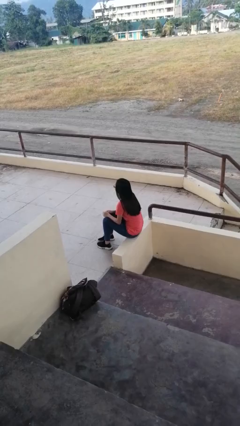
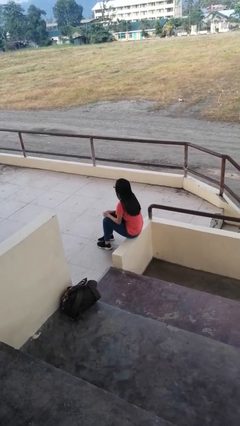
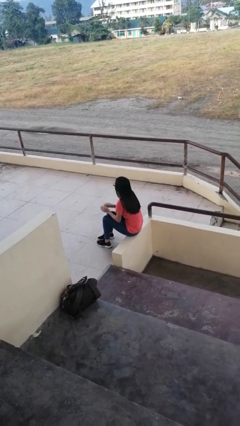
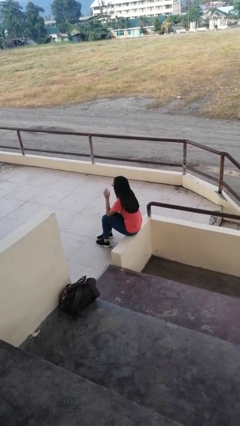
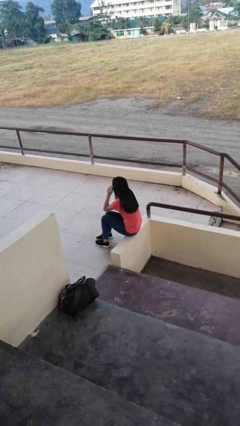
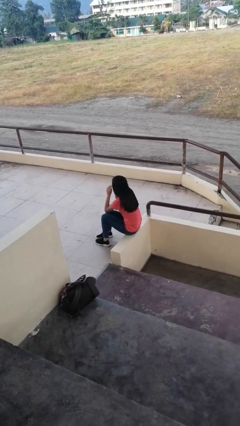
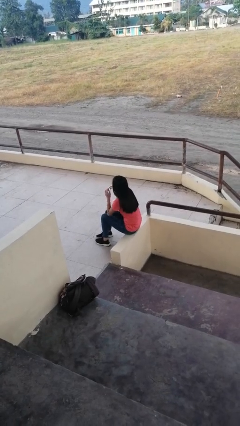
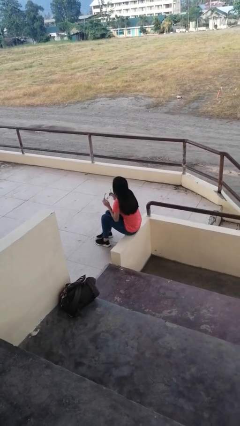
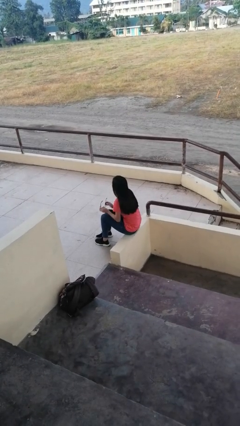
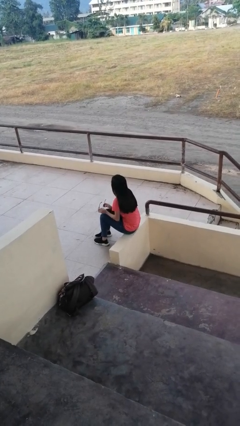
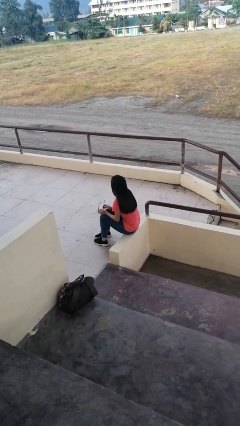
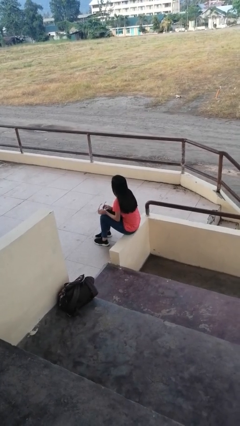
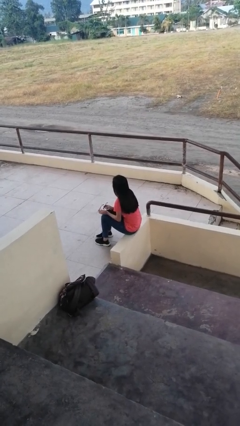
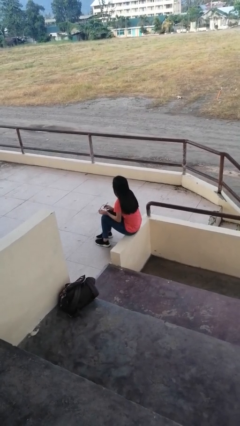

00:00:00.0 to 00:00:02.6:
person takes off glasses

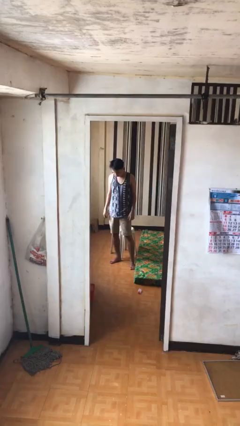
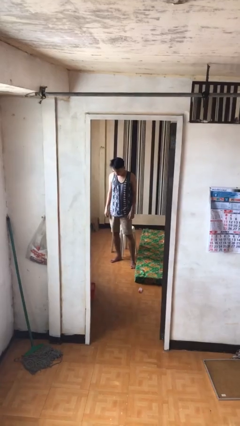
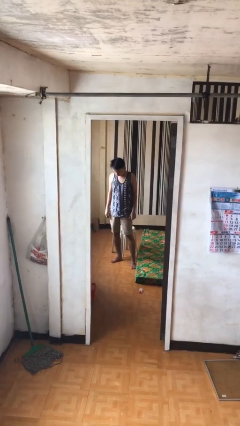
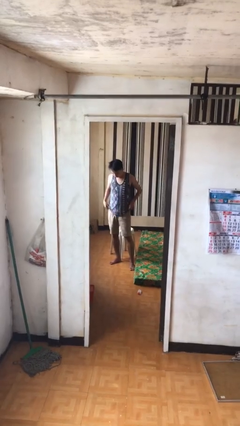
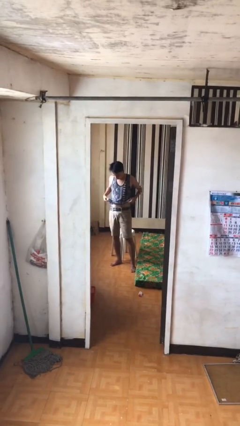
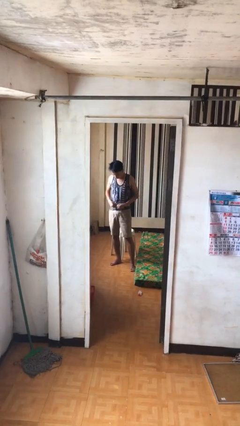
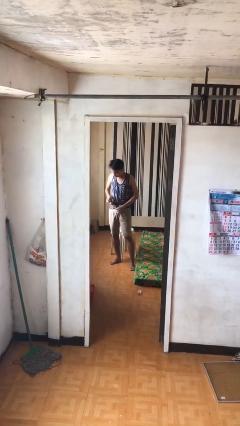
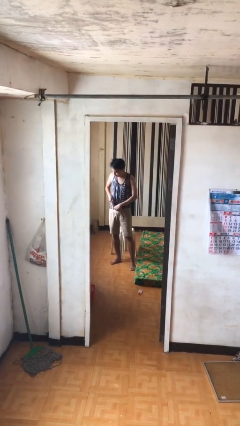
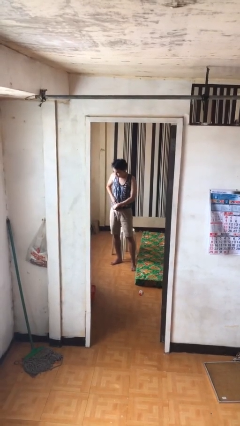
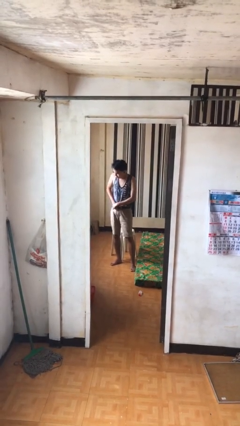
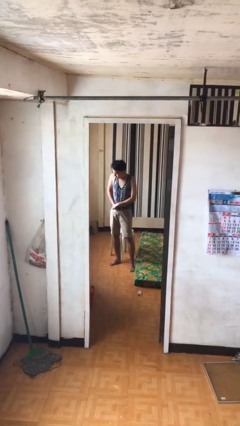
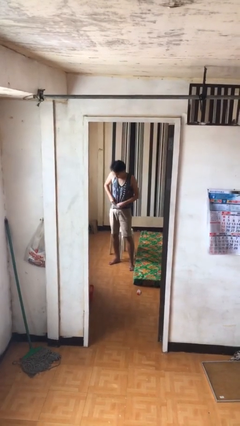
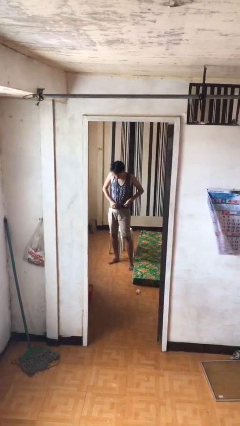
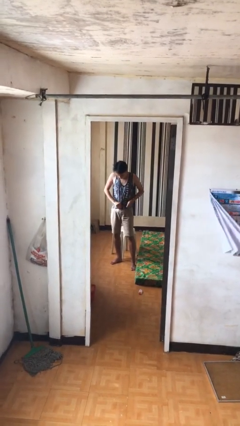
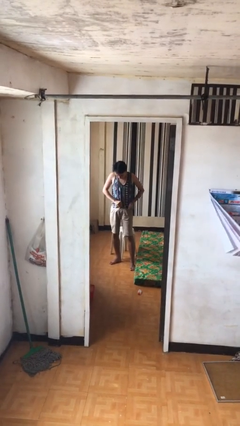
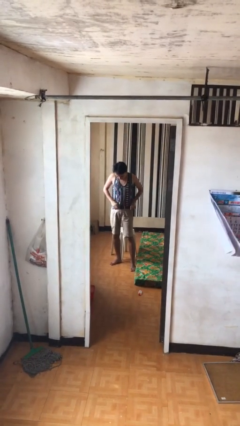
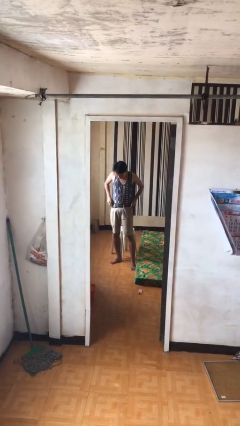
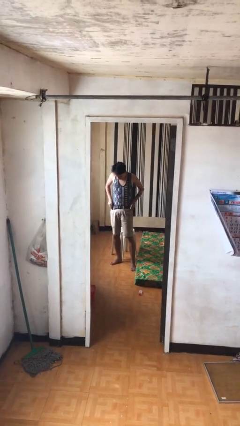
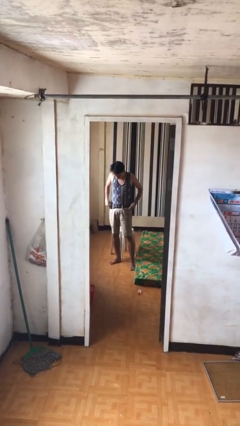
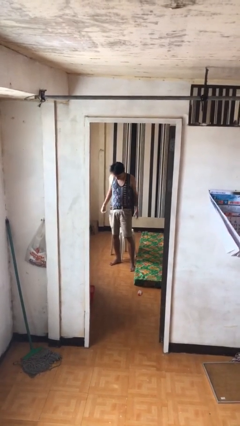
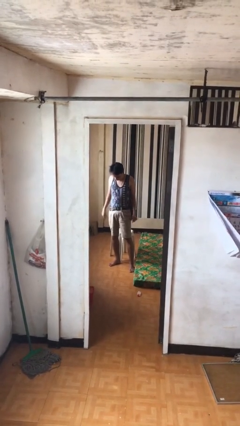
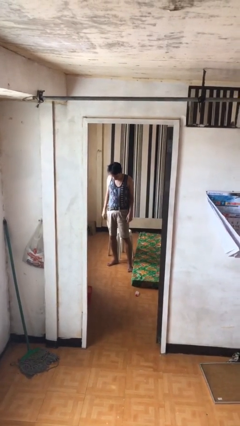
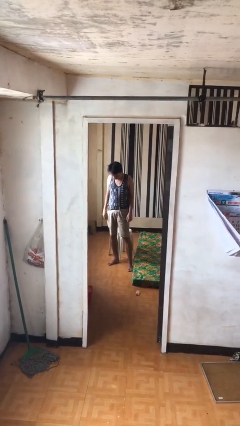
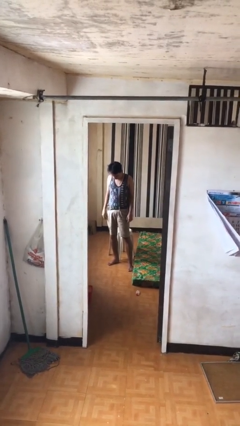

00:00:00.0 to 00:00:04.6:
person tucks in shirt

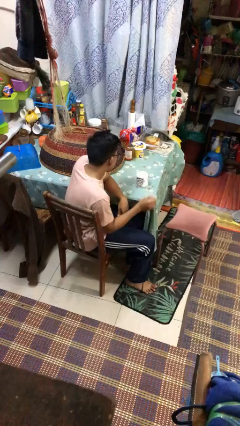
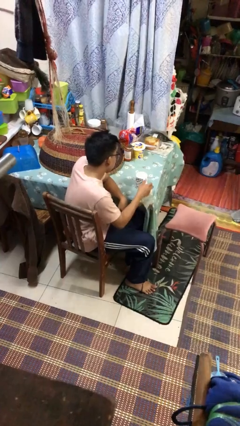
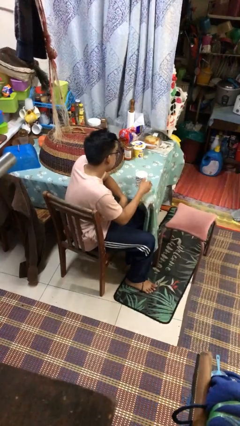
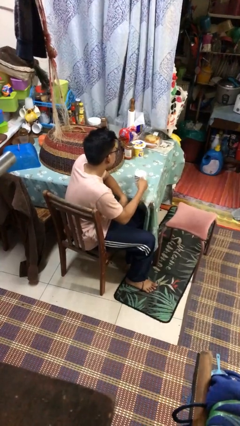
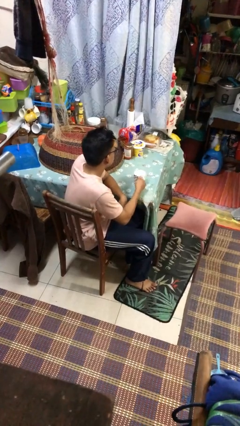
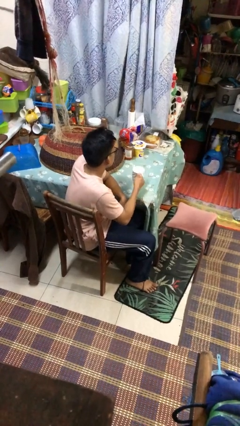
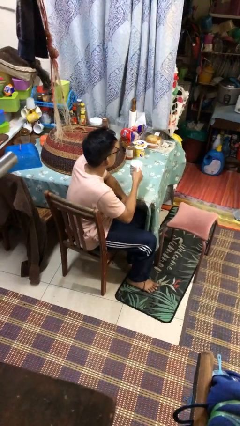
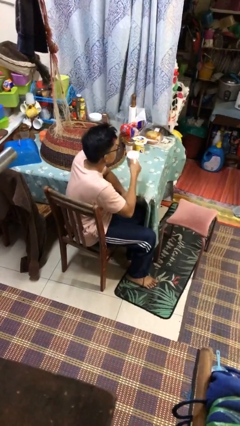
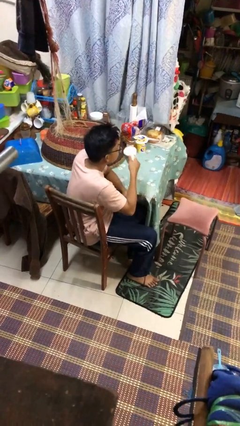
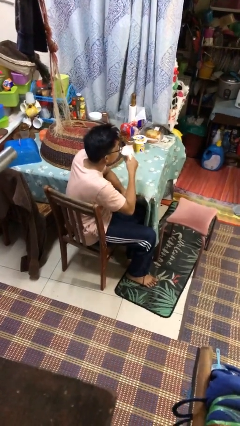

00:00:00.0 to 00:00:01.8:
person picks up object from table

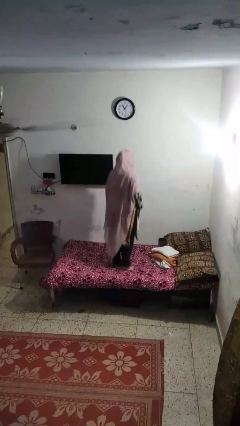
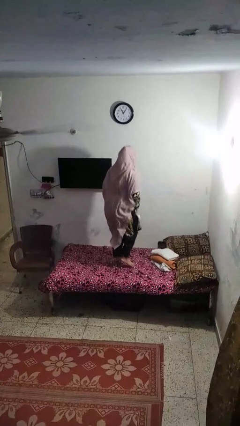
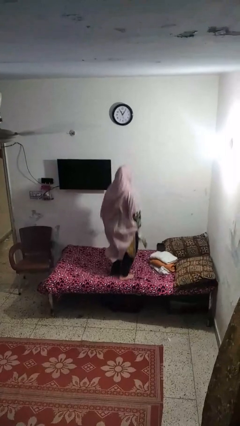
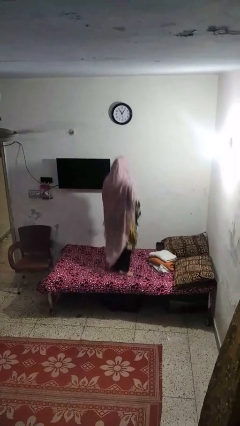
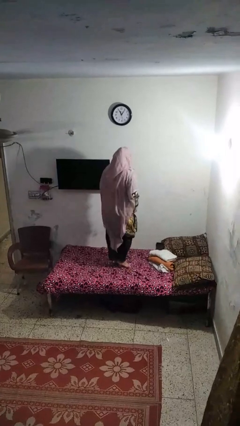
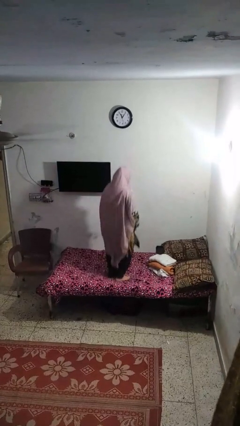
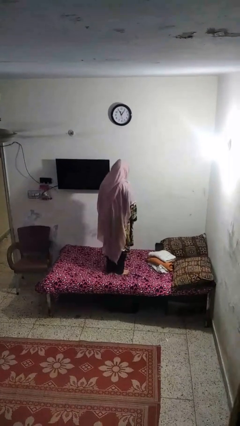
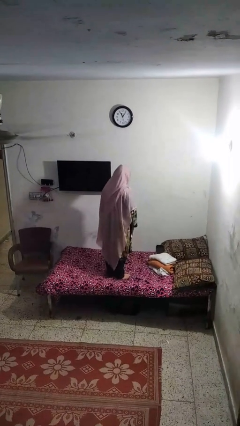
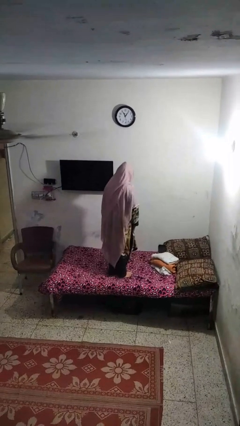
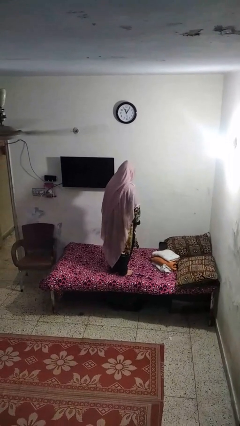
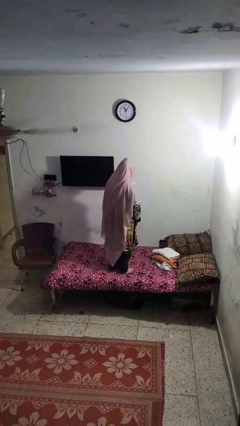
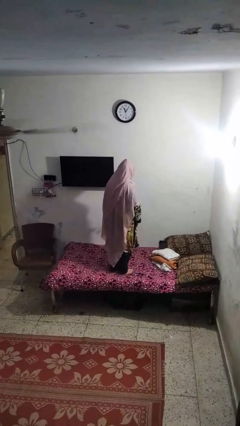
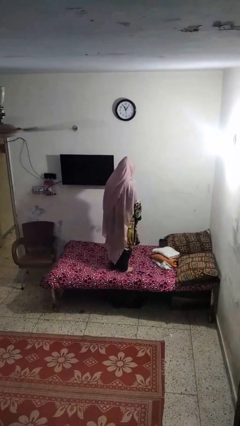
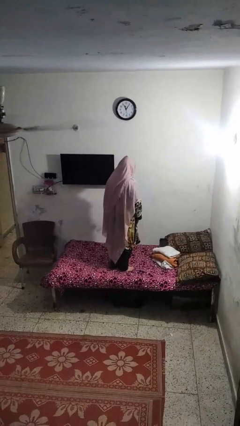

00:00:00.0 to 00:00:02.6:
person jumps on bed

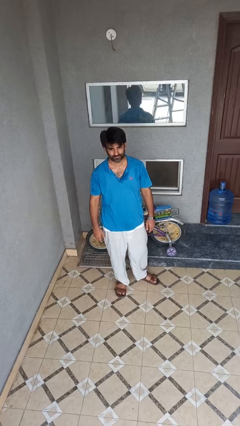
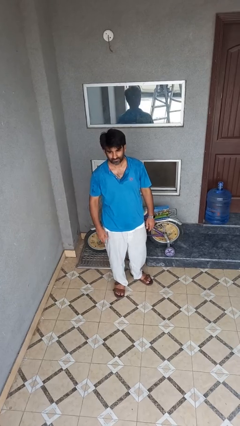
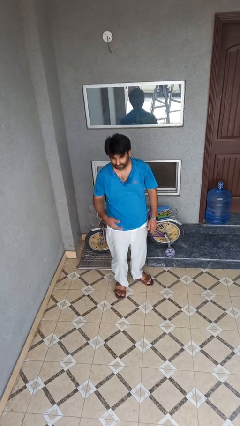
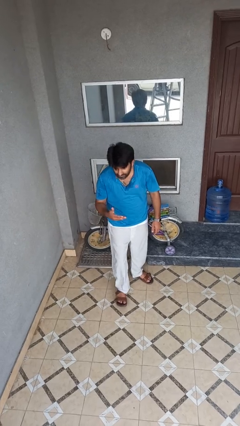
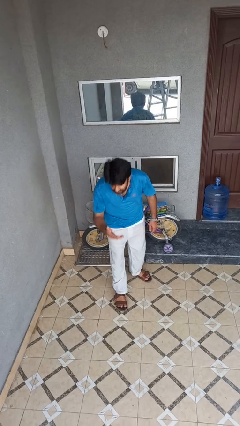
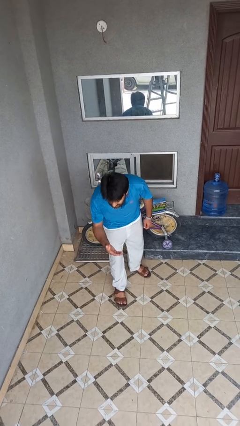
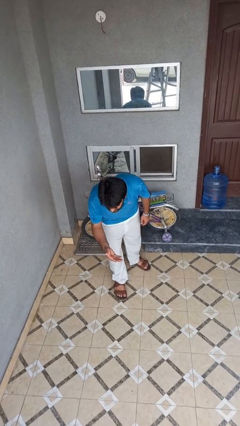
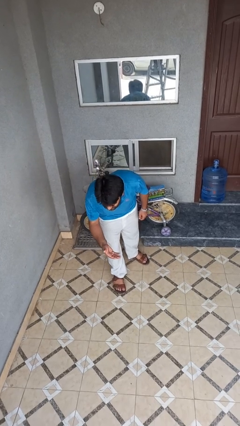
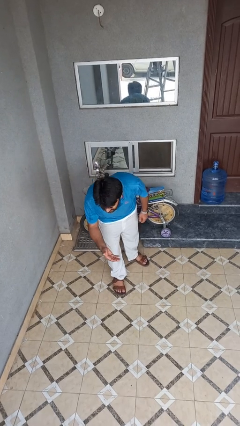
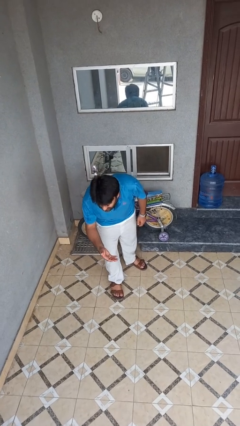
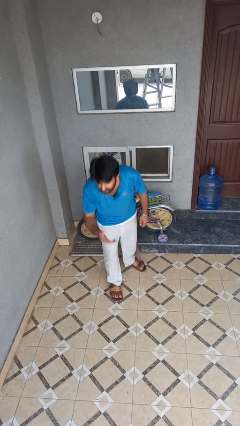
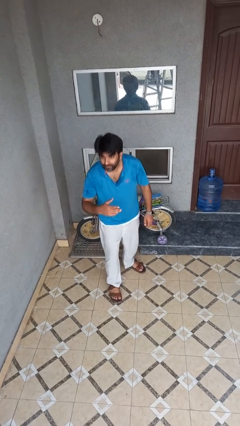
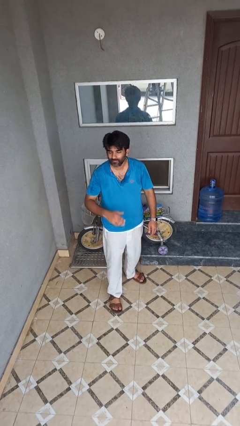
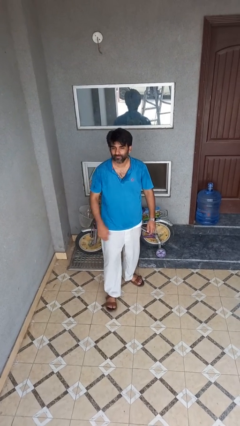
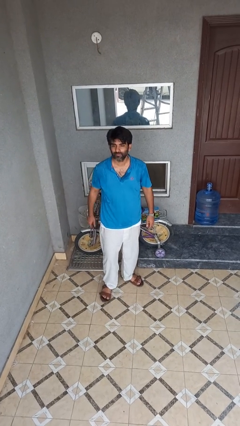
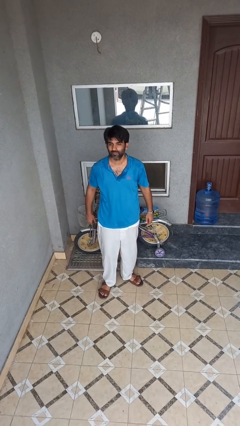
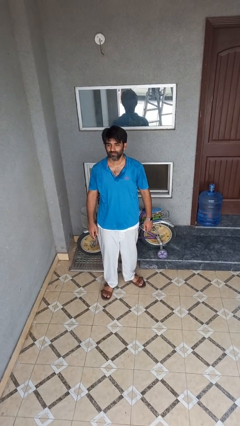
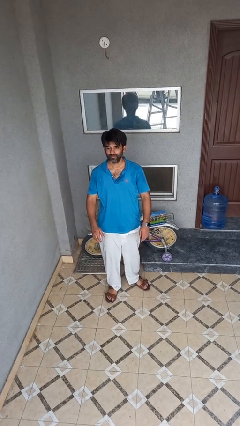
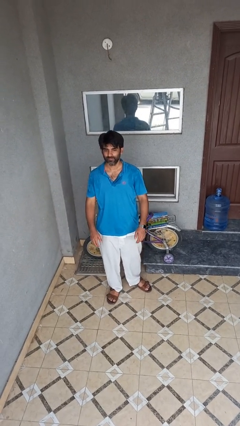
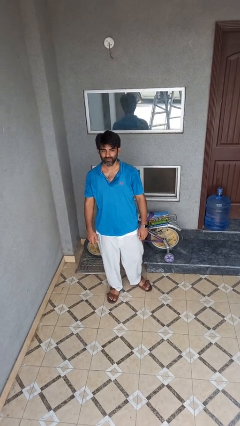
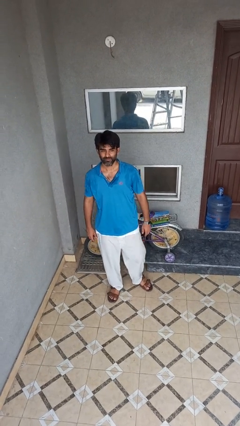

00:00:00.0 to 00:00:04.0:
person bows

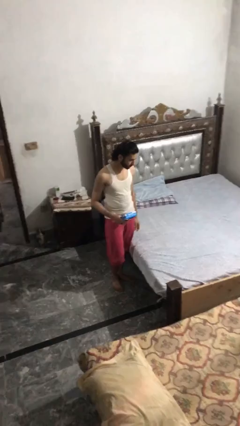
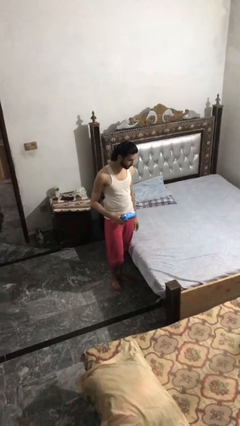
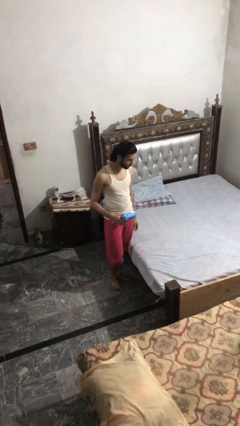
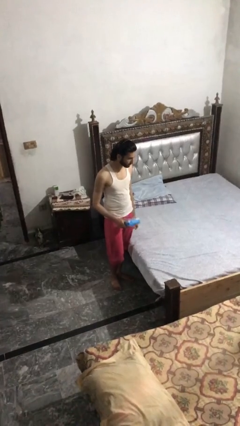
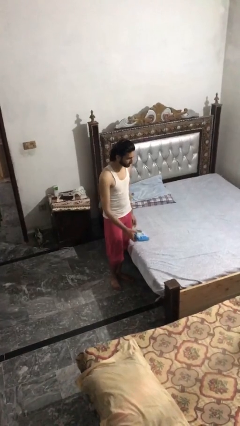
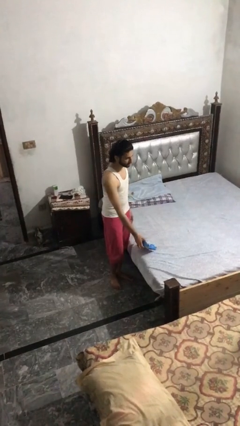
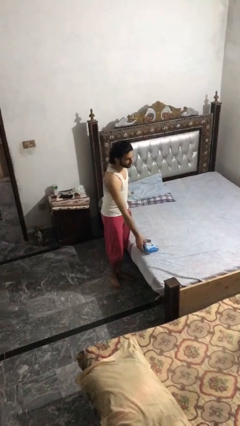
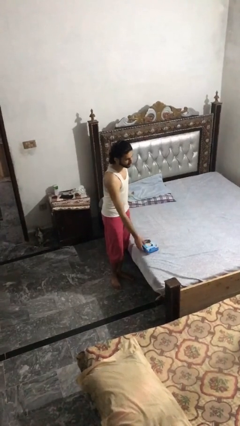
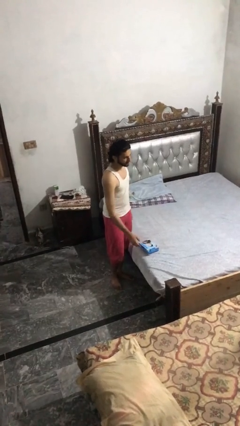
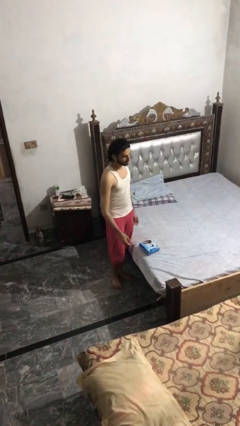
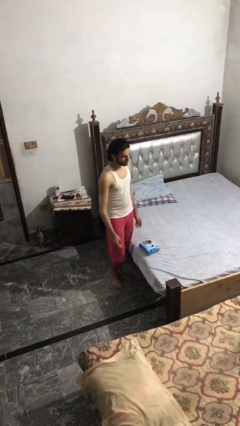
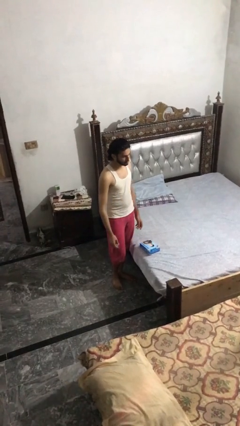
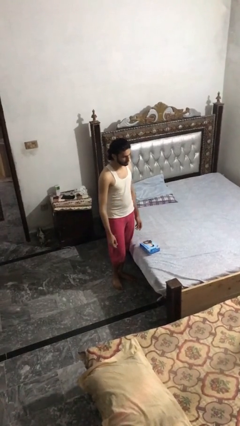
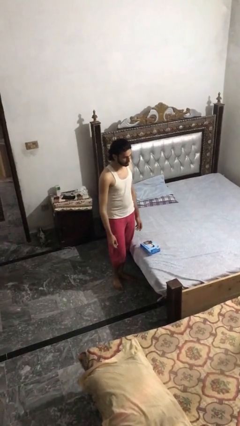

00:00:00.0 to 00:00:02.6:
person puts down object on bed
